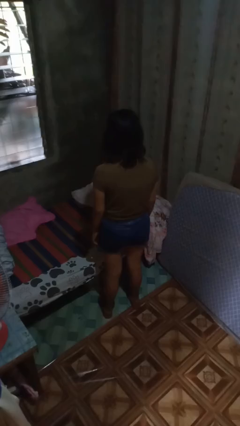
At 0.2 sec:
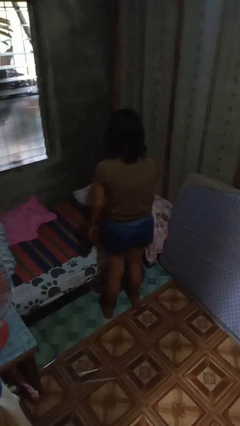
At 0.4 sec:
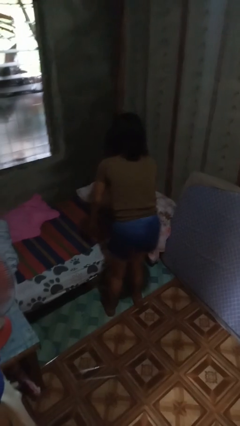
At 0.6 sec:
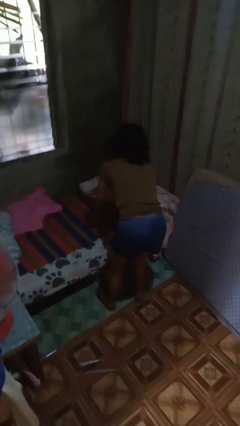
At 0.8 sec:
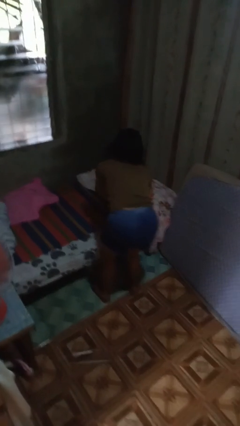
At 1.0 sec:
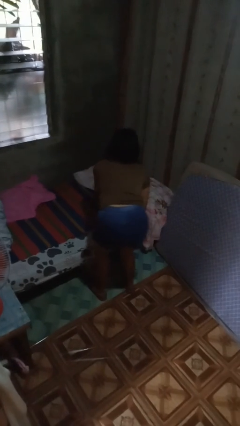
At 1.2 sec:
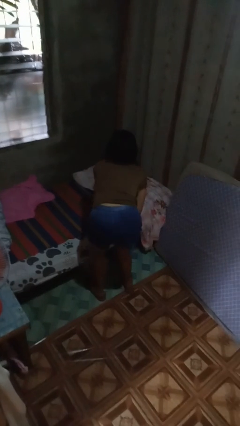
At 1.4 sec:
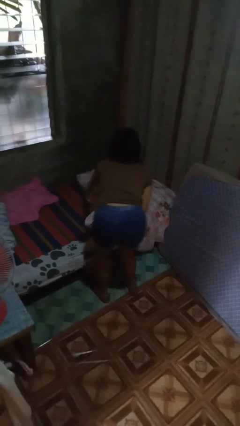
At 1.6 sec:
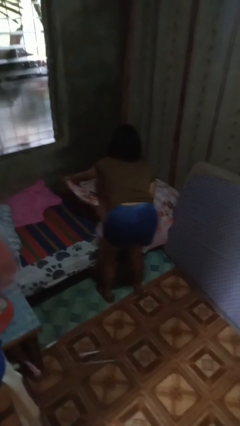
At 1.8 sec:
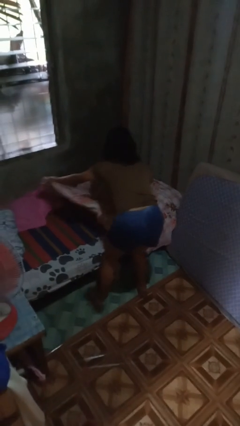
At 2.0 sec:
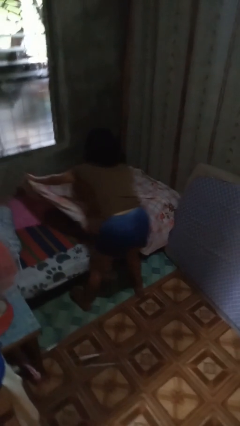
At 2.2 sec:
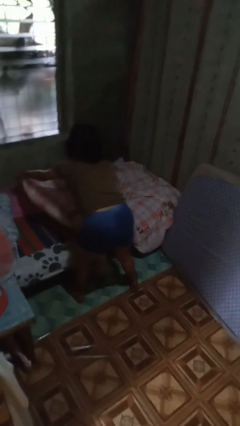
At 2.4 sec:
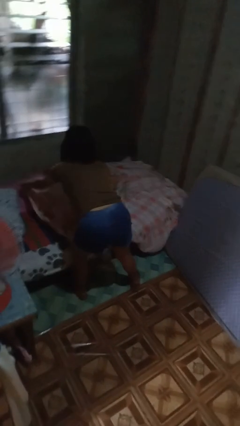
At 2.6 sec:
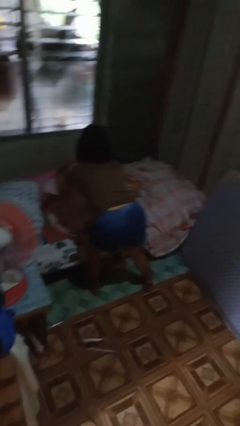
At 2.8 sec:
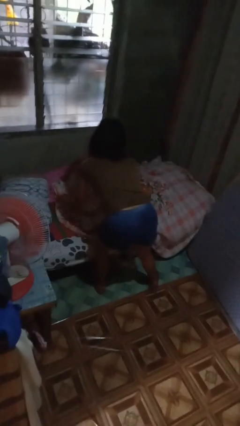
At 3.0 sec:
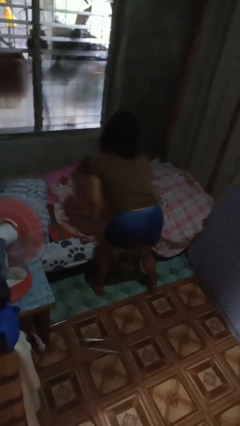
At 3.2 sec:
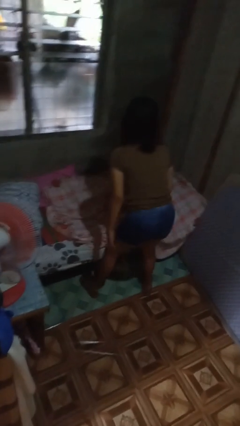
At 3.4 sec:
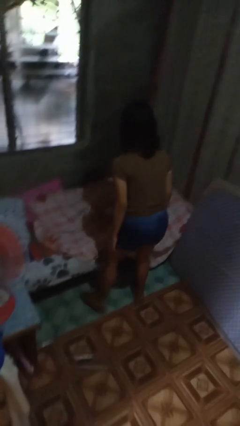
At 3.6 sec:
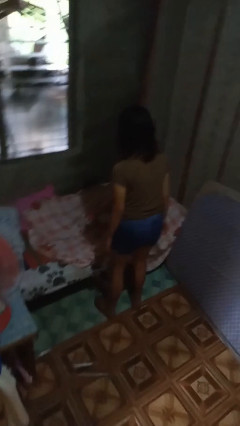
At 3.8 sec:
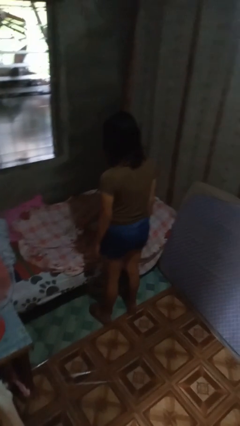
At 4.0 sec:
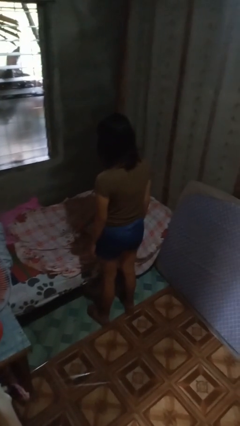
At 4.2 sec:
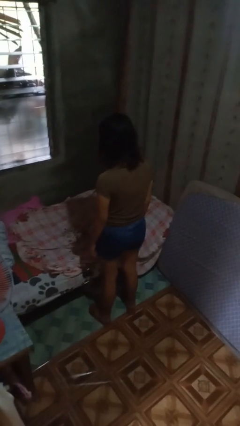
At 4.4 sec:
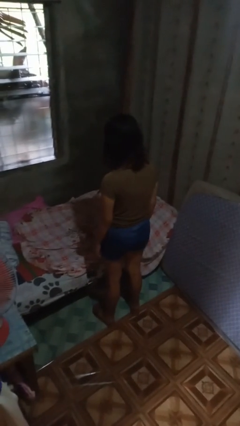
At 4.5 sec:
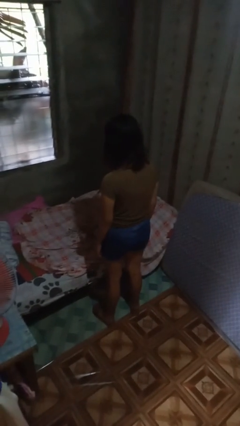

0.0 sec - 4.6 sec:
person makes bed

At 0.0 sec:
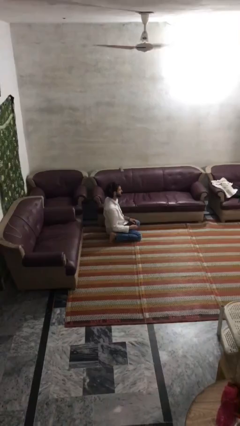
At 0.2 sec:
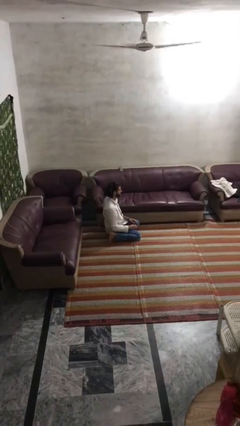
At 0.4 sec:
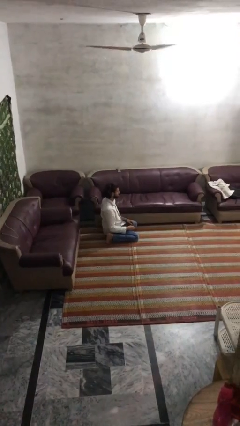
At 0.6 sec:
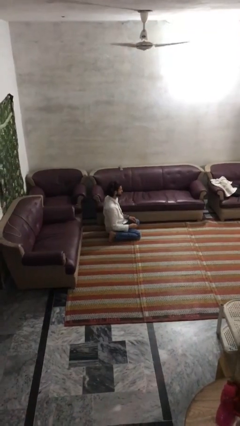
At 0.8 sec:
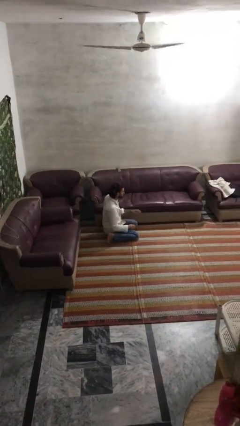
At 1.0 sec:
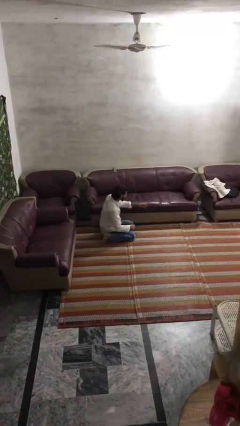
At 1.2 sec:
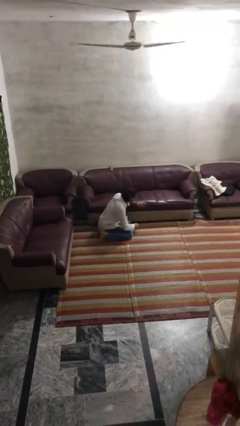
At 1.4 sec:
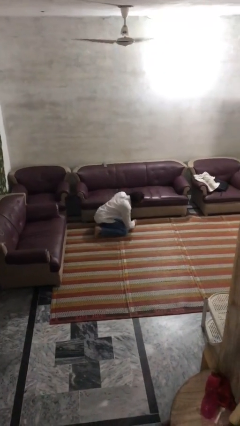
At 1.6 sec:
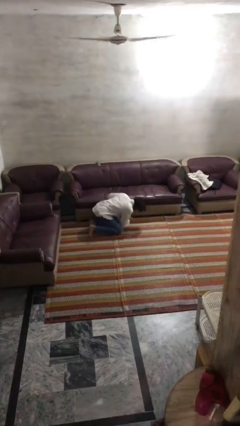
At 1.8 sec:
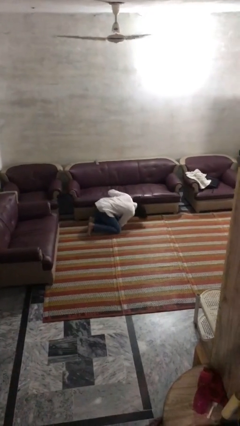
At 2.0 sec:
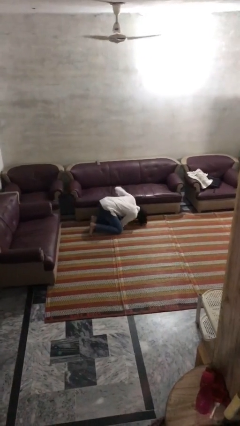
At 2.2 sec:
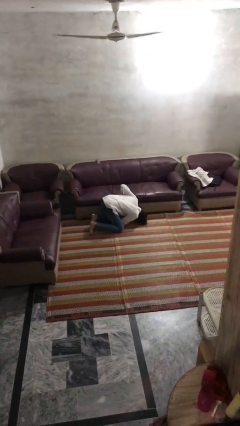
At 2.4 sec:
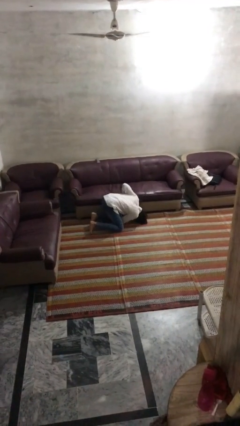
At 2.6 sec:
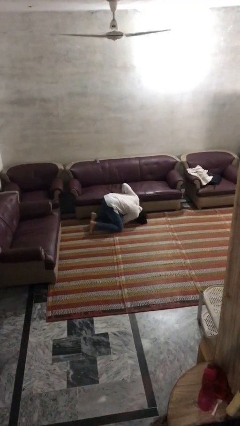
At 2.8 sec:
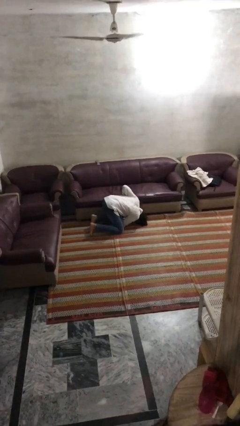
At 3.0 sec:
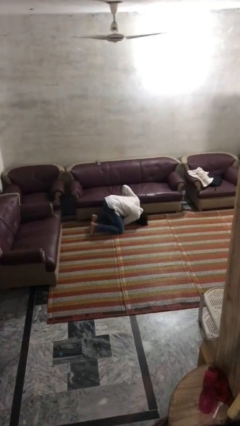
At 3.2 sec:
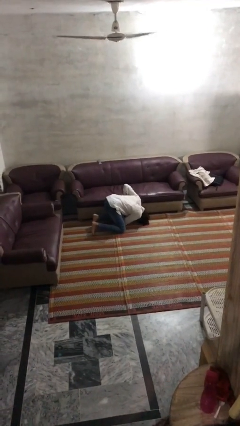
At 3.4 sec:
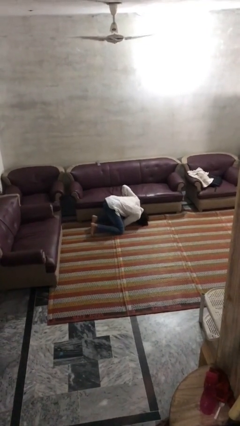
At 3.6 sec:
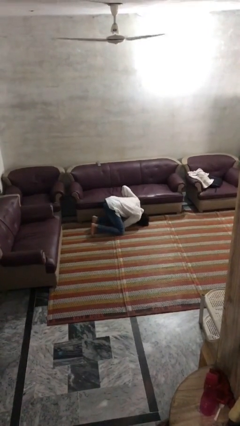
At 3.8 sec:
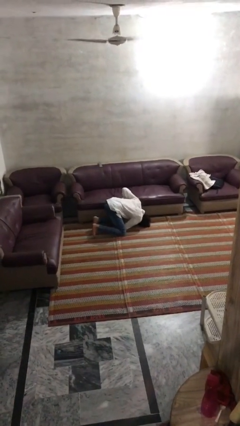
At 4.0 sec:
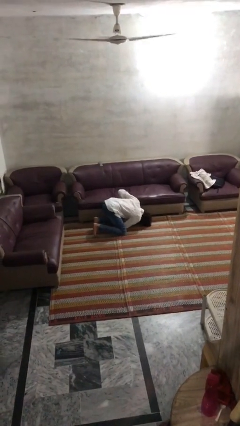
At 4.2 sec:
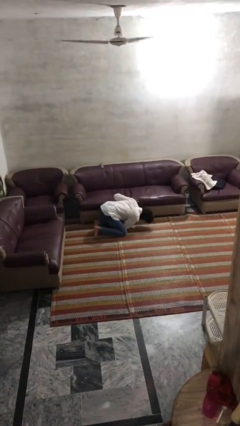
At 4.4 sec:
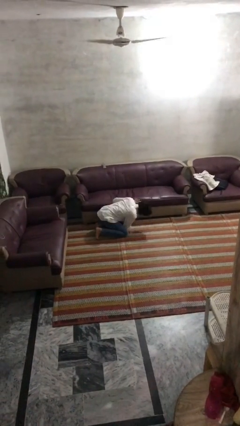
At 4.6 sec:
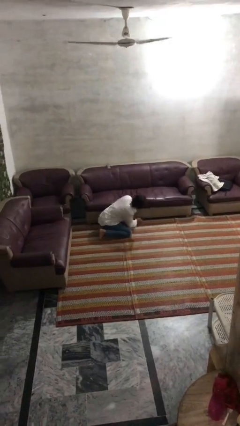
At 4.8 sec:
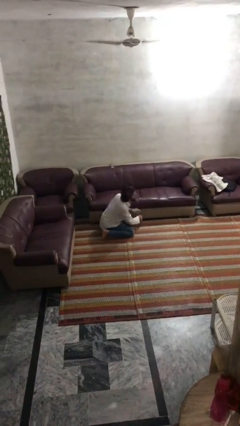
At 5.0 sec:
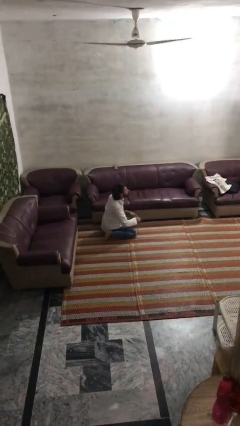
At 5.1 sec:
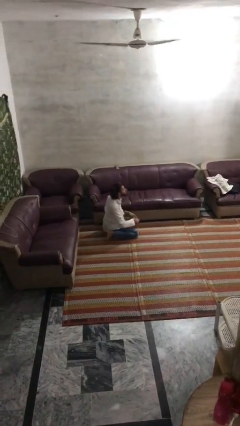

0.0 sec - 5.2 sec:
person searches under couch

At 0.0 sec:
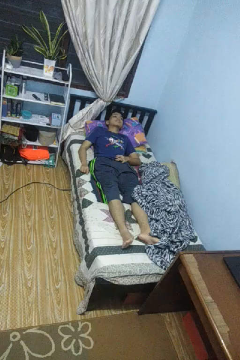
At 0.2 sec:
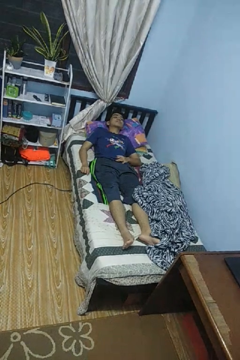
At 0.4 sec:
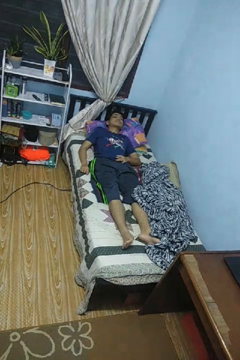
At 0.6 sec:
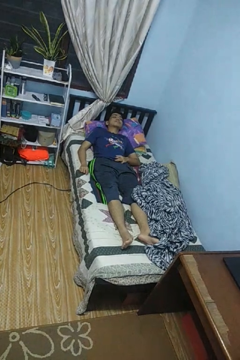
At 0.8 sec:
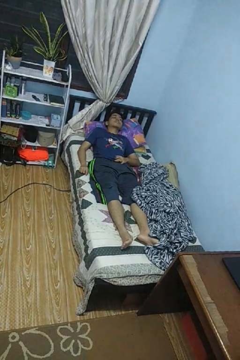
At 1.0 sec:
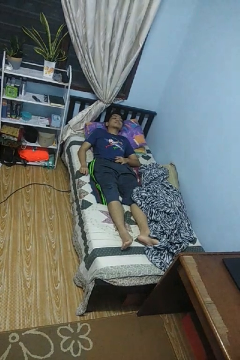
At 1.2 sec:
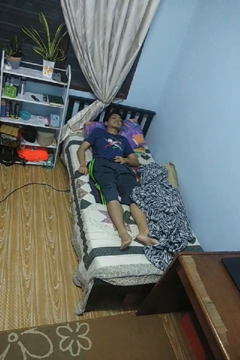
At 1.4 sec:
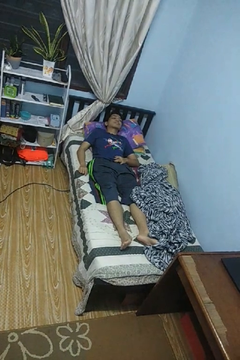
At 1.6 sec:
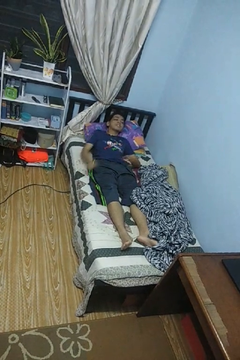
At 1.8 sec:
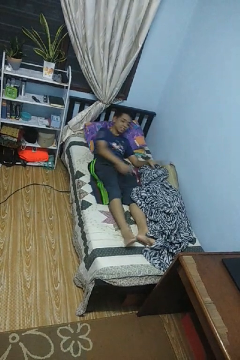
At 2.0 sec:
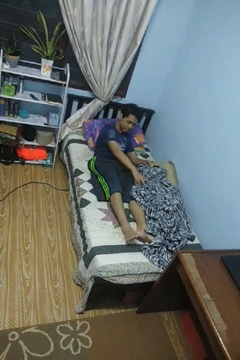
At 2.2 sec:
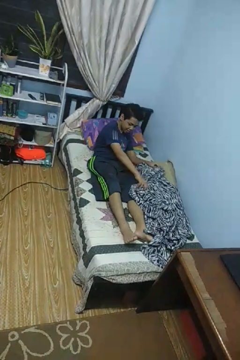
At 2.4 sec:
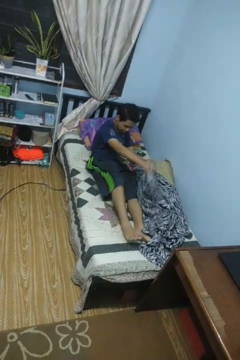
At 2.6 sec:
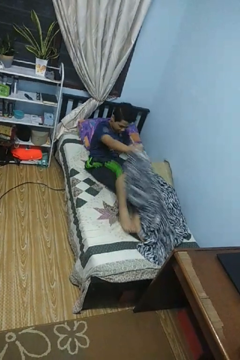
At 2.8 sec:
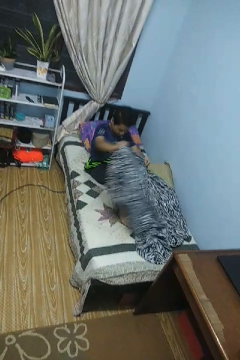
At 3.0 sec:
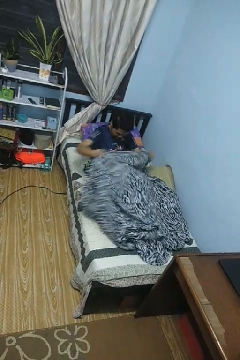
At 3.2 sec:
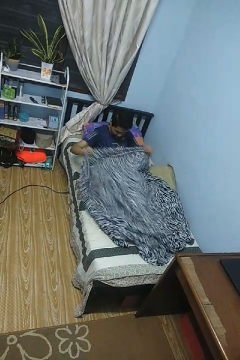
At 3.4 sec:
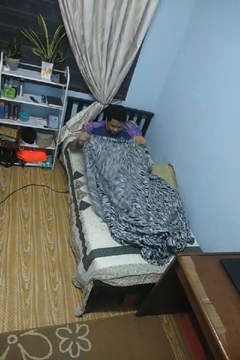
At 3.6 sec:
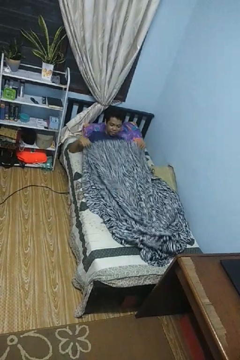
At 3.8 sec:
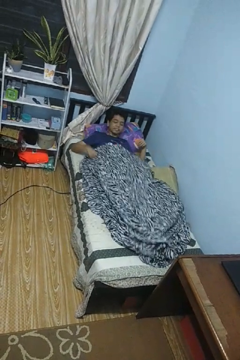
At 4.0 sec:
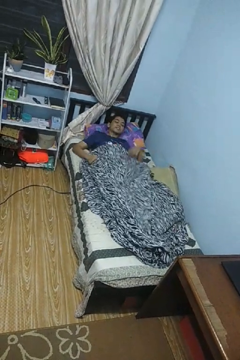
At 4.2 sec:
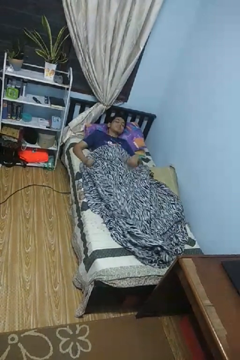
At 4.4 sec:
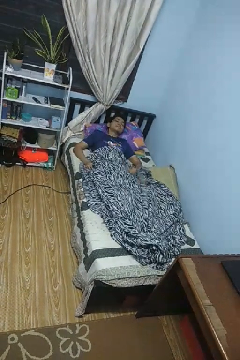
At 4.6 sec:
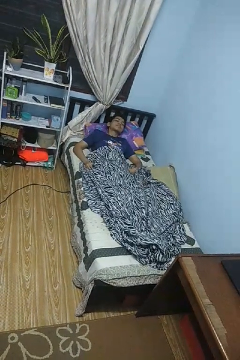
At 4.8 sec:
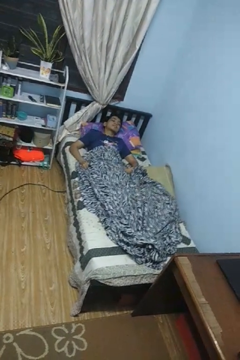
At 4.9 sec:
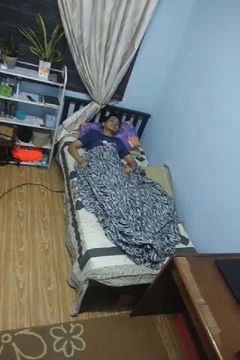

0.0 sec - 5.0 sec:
person covers with blanket

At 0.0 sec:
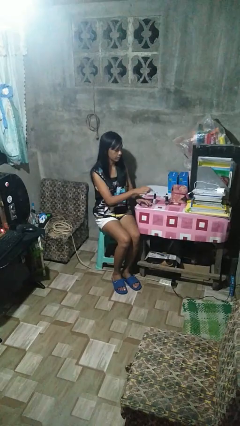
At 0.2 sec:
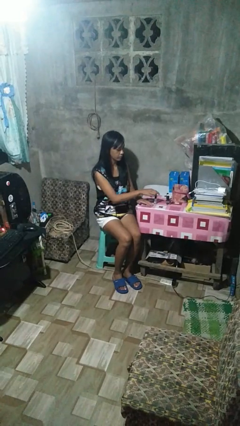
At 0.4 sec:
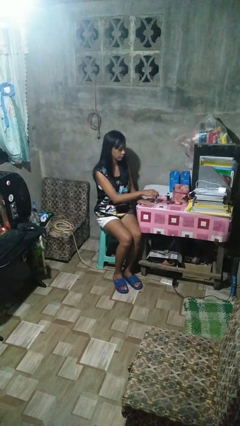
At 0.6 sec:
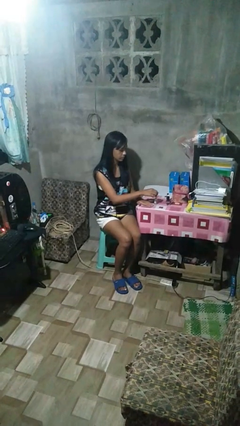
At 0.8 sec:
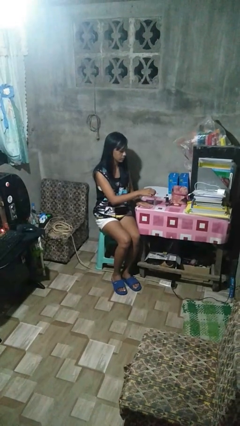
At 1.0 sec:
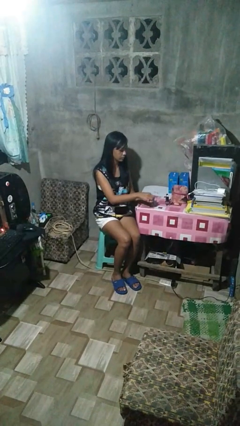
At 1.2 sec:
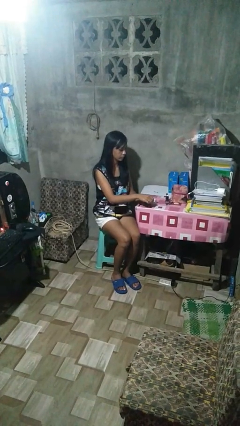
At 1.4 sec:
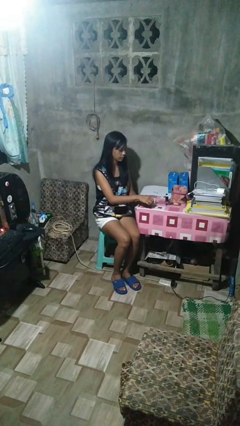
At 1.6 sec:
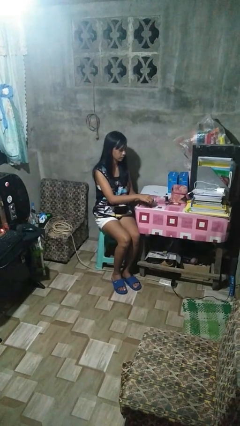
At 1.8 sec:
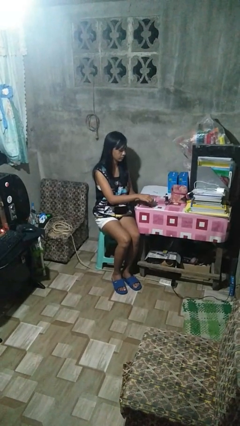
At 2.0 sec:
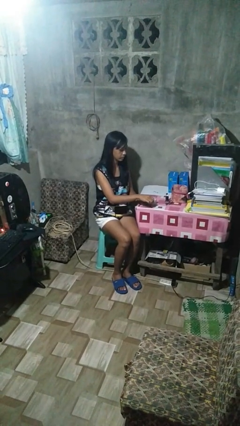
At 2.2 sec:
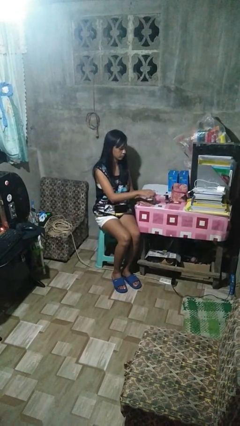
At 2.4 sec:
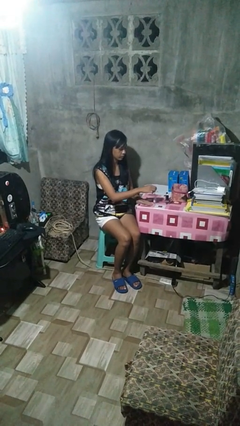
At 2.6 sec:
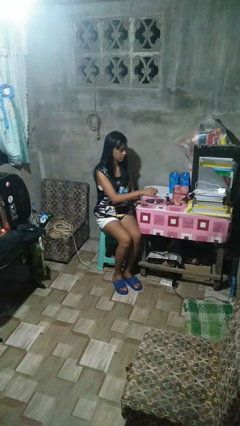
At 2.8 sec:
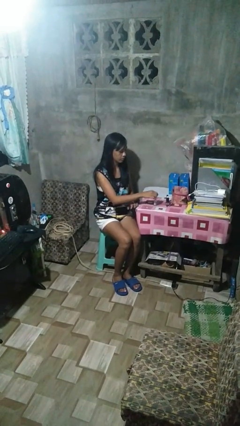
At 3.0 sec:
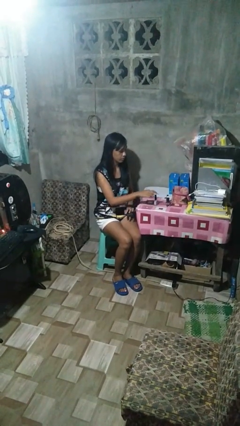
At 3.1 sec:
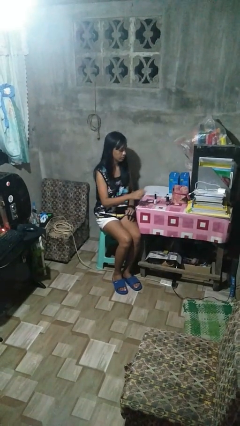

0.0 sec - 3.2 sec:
person paints fingernails
